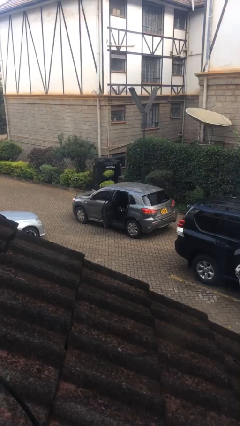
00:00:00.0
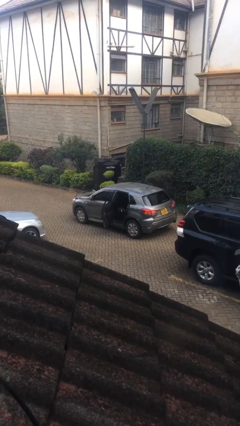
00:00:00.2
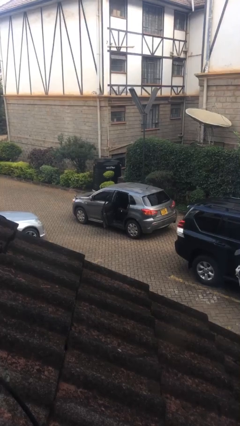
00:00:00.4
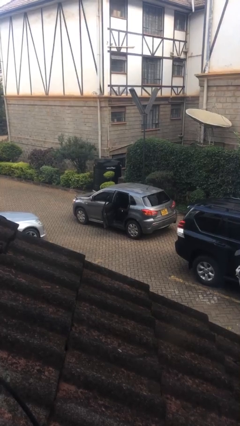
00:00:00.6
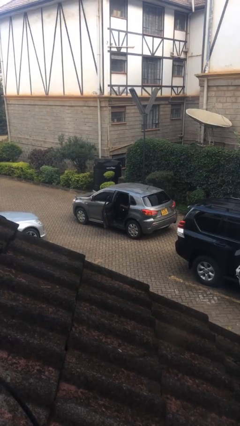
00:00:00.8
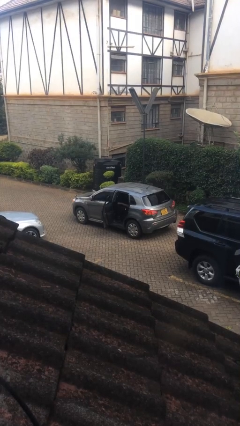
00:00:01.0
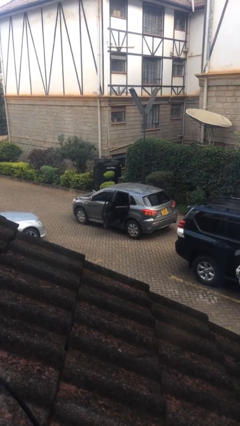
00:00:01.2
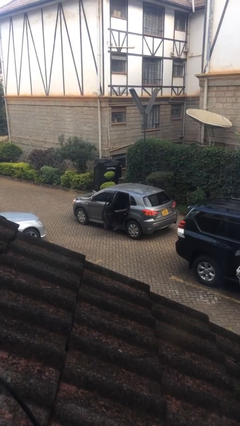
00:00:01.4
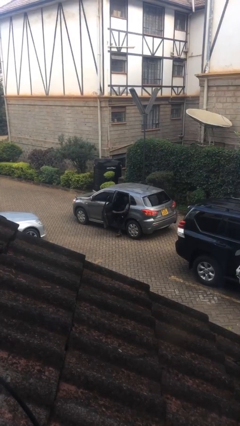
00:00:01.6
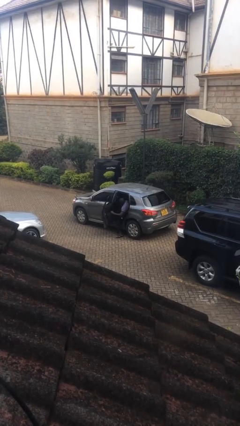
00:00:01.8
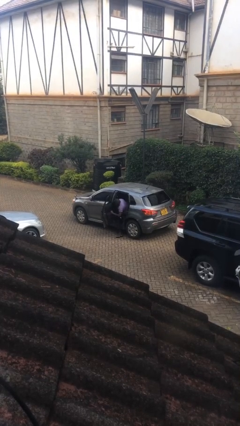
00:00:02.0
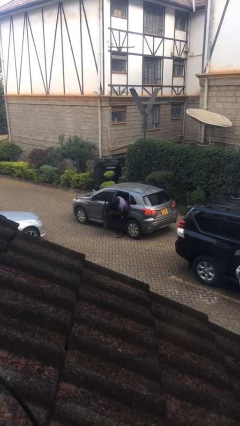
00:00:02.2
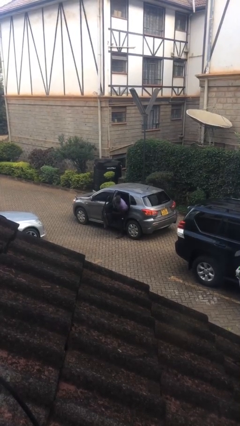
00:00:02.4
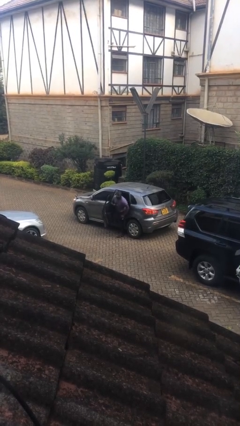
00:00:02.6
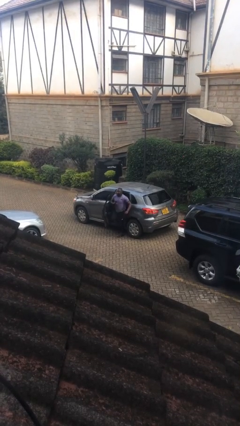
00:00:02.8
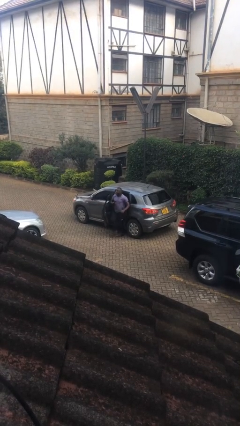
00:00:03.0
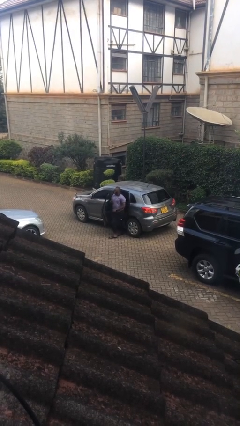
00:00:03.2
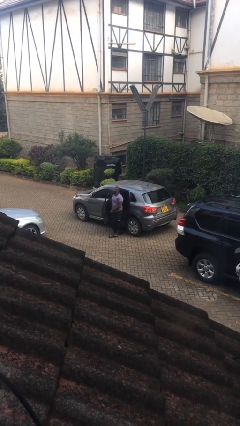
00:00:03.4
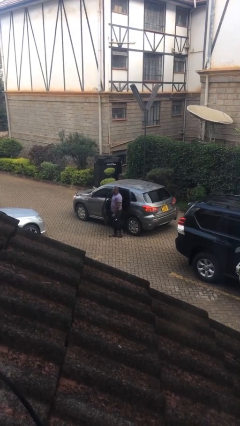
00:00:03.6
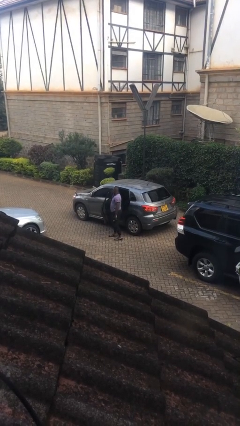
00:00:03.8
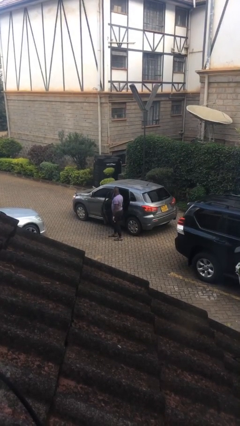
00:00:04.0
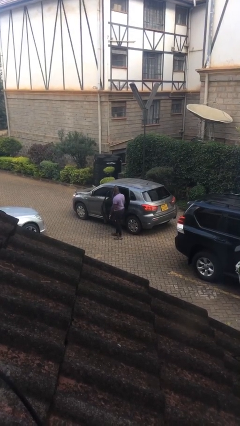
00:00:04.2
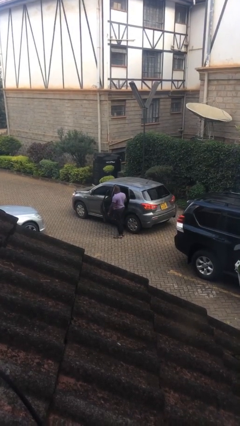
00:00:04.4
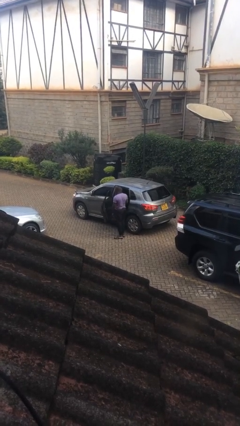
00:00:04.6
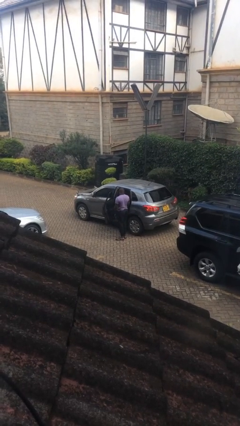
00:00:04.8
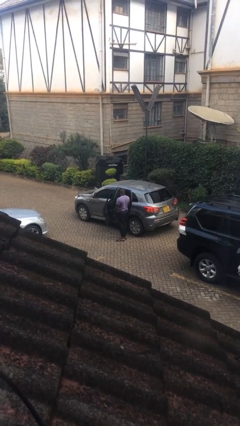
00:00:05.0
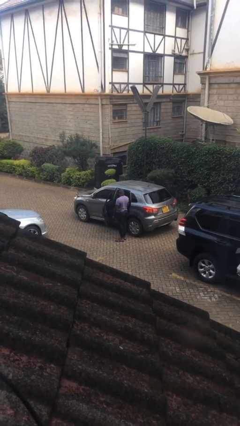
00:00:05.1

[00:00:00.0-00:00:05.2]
person exits car

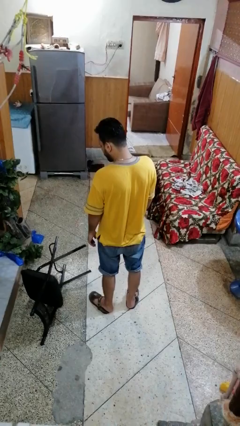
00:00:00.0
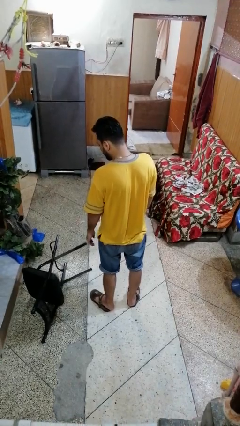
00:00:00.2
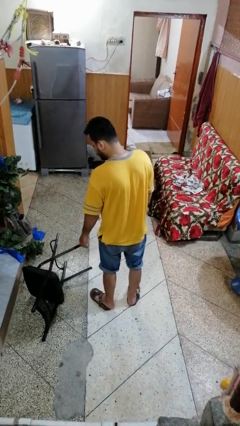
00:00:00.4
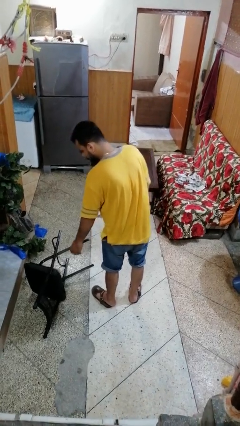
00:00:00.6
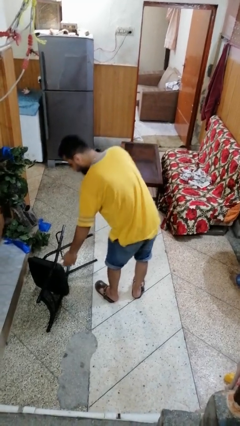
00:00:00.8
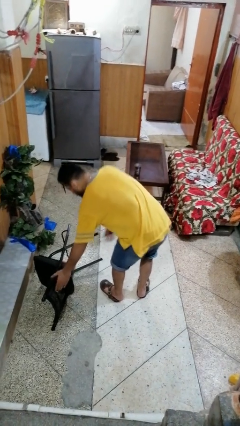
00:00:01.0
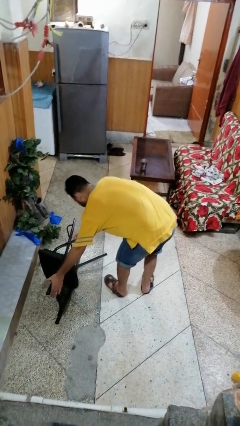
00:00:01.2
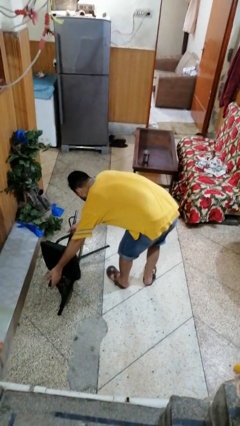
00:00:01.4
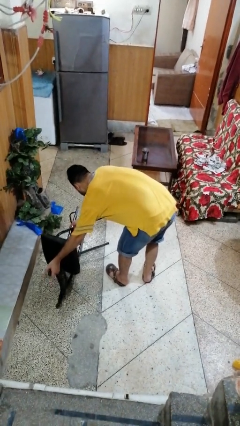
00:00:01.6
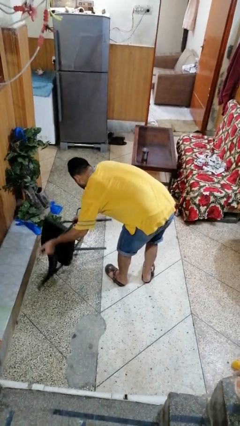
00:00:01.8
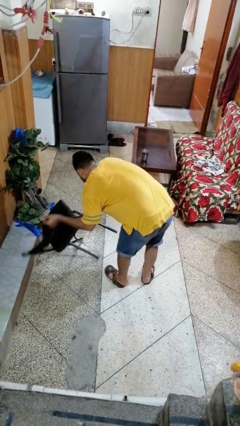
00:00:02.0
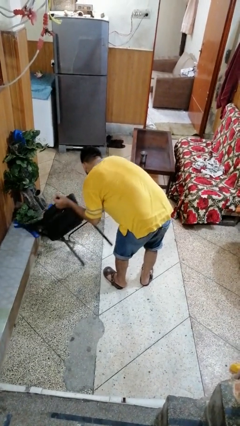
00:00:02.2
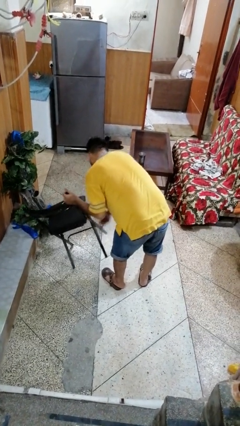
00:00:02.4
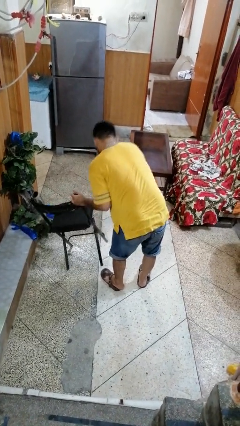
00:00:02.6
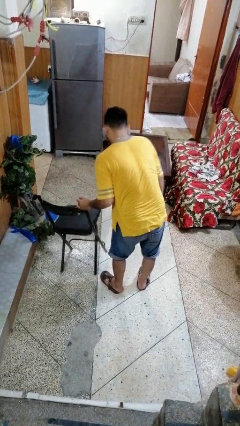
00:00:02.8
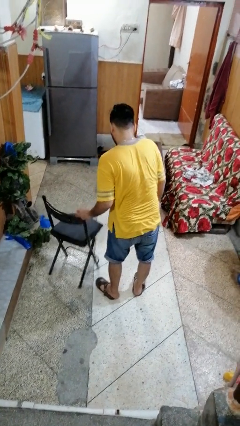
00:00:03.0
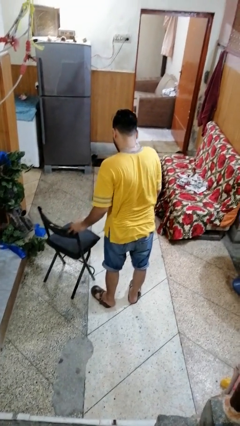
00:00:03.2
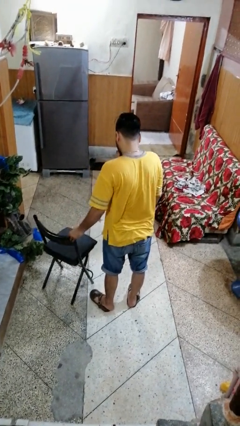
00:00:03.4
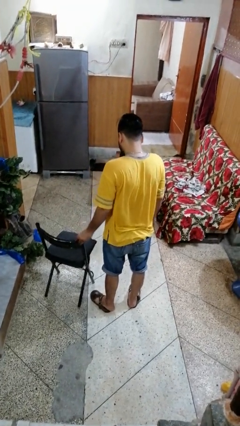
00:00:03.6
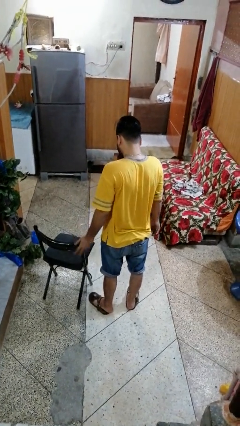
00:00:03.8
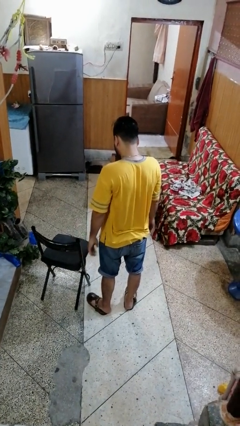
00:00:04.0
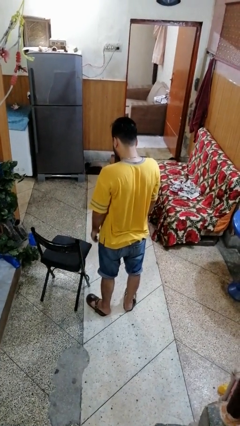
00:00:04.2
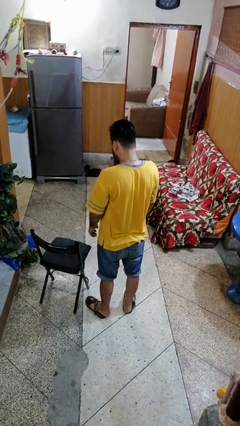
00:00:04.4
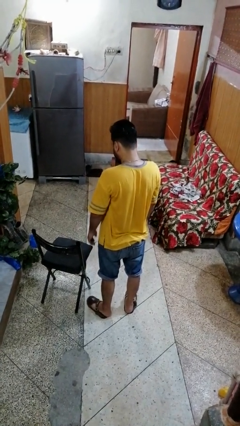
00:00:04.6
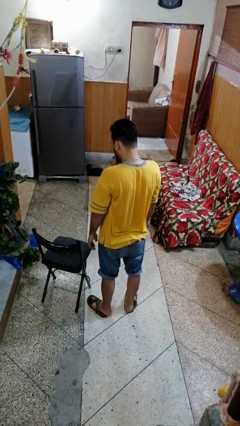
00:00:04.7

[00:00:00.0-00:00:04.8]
person sets upright furniture

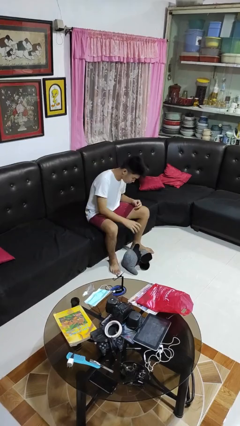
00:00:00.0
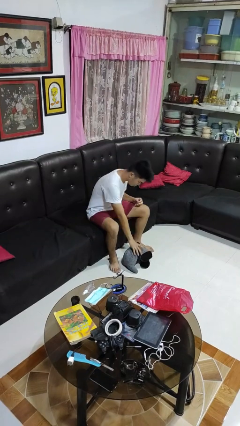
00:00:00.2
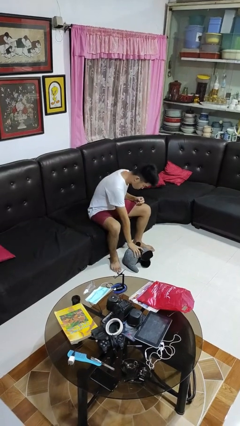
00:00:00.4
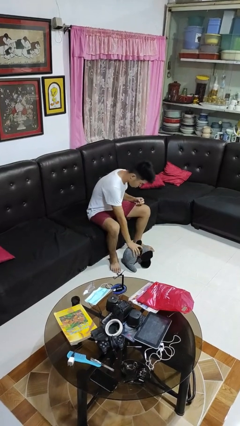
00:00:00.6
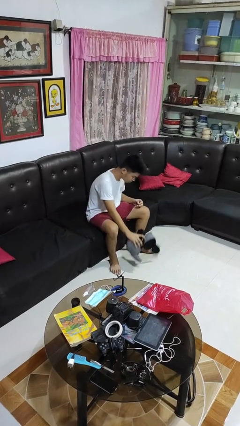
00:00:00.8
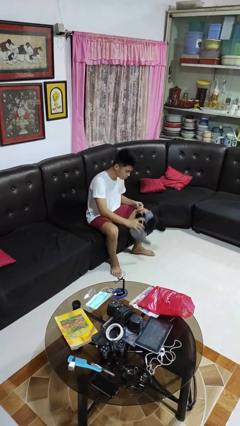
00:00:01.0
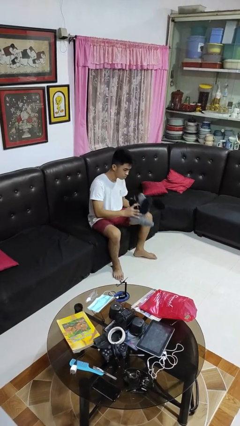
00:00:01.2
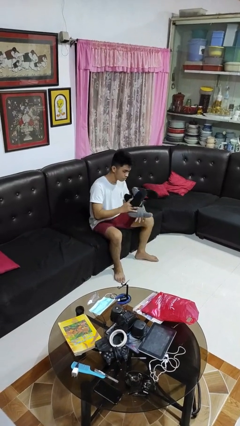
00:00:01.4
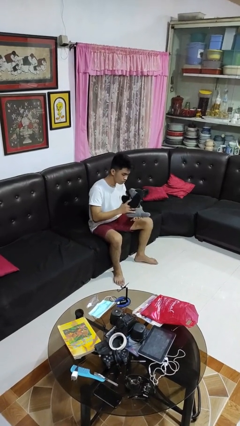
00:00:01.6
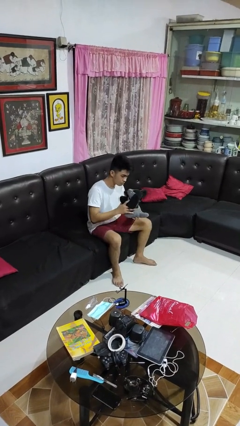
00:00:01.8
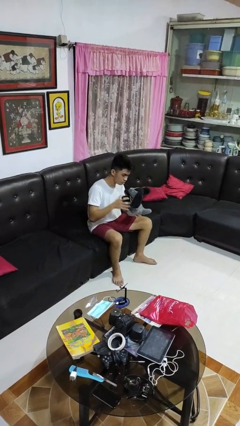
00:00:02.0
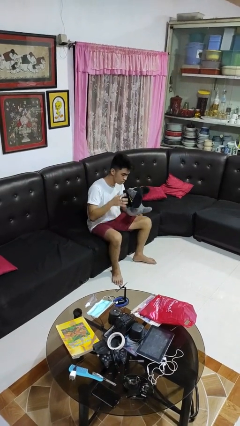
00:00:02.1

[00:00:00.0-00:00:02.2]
person picks up object from floor

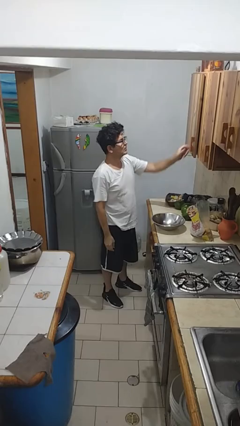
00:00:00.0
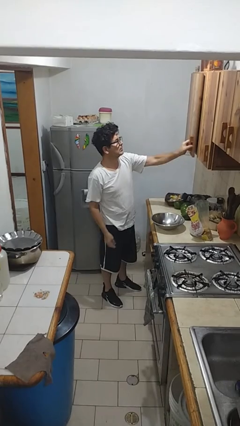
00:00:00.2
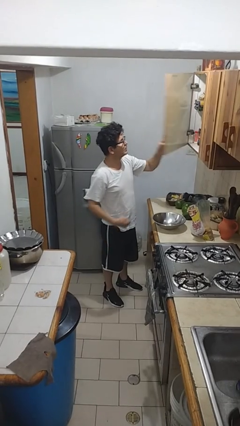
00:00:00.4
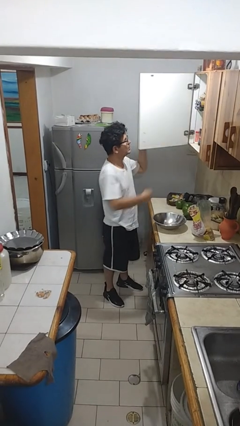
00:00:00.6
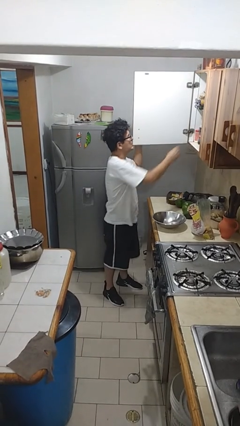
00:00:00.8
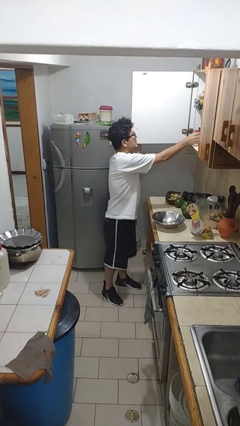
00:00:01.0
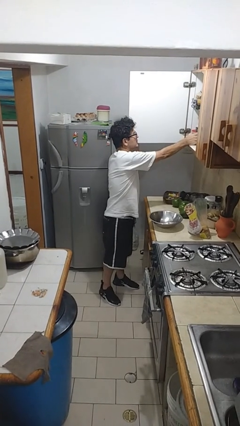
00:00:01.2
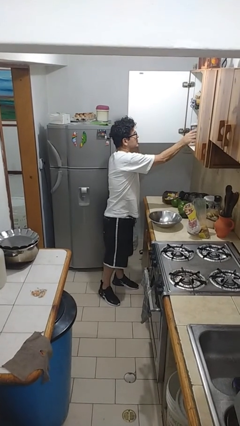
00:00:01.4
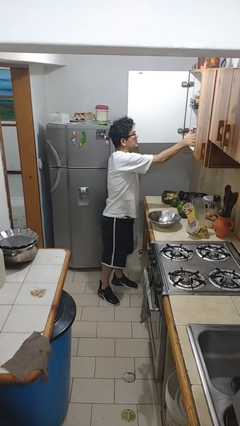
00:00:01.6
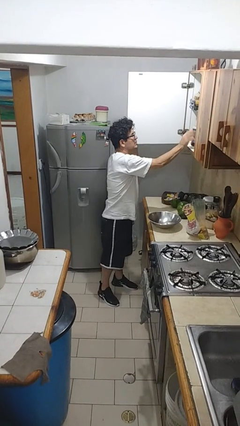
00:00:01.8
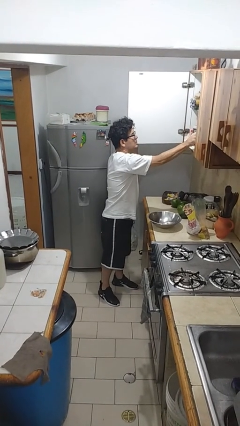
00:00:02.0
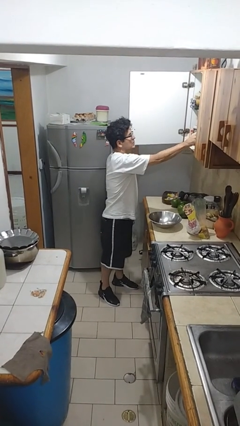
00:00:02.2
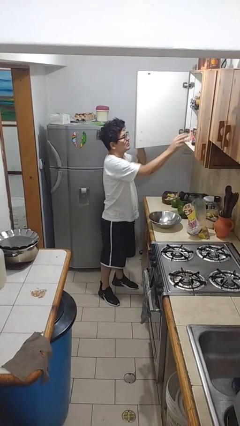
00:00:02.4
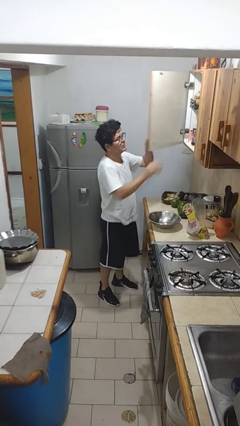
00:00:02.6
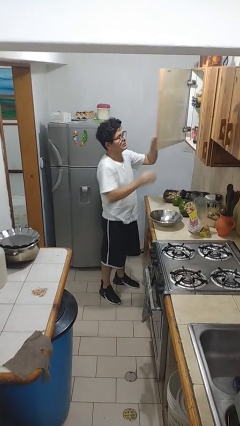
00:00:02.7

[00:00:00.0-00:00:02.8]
person searches in kitchen drawer

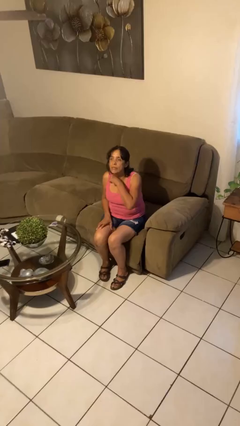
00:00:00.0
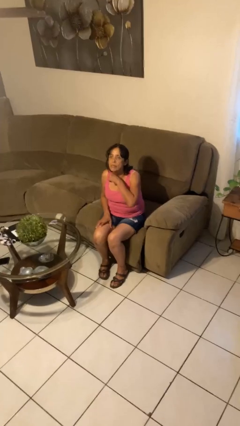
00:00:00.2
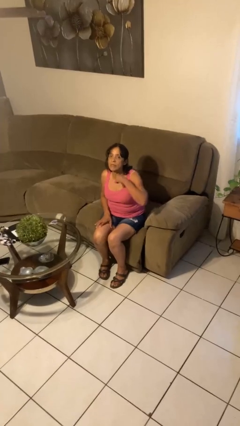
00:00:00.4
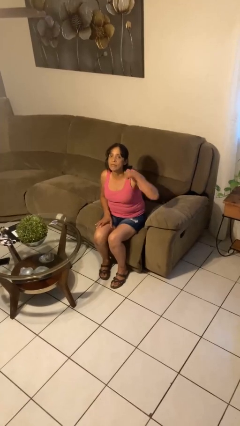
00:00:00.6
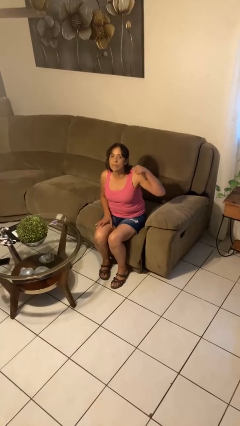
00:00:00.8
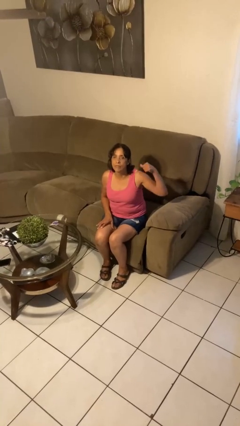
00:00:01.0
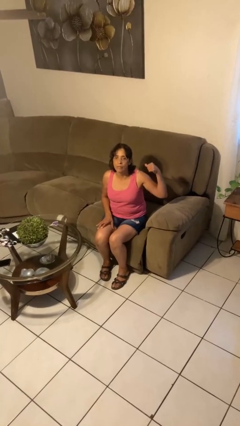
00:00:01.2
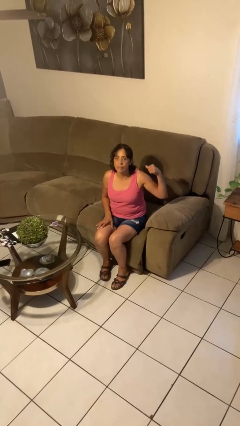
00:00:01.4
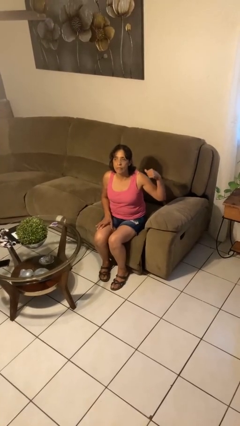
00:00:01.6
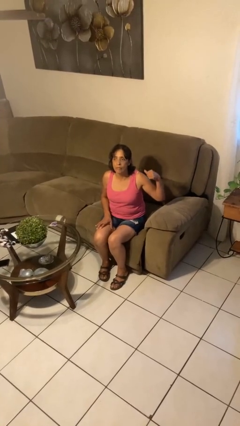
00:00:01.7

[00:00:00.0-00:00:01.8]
person gestures cut

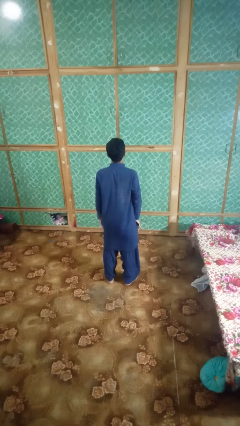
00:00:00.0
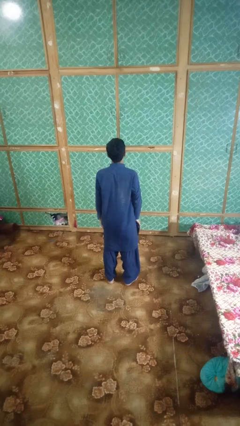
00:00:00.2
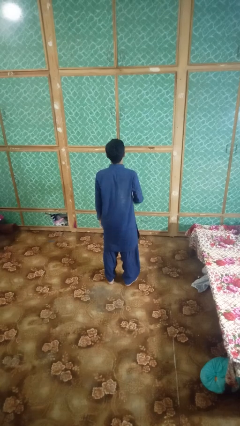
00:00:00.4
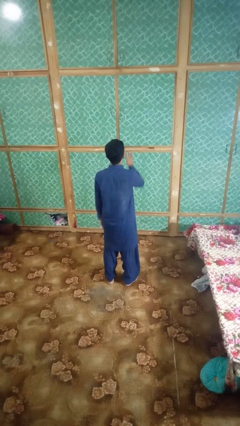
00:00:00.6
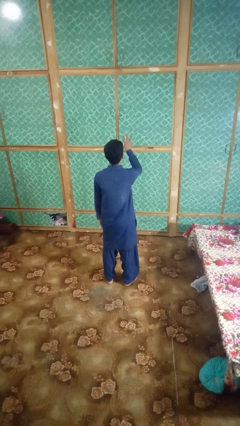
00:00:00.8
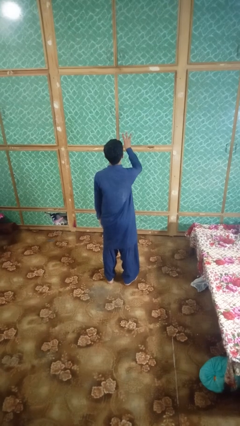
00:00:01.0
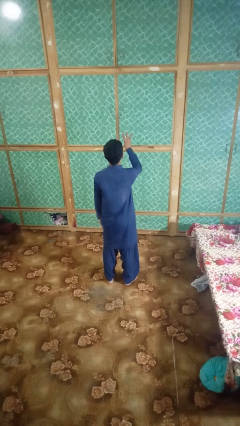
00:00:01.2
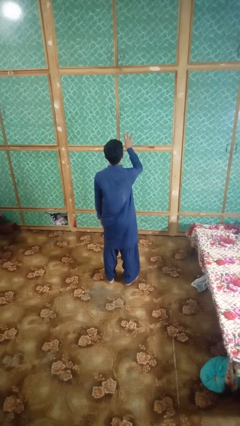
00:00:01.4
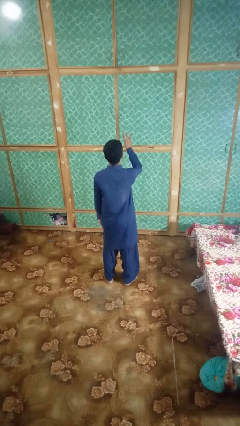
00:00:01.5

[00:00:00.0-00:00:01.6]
person gestures number three
